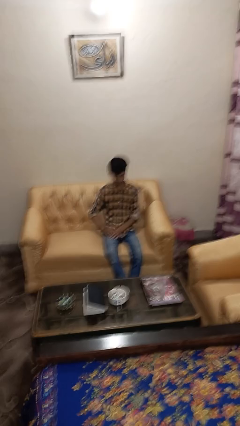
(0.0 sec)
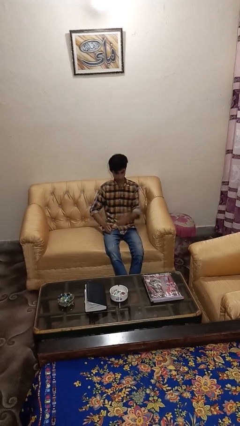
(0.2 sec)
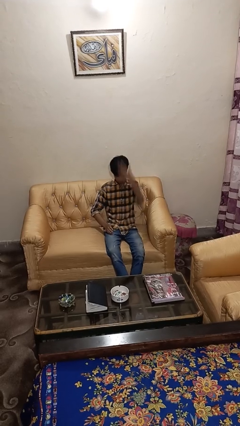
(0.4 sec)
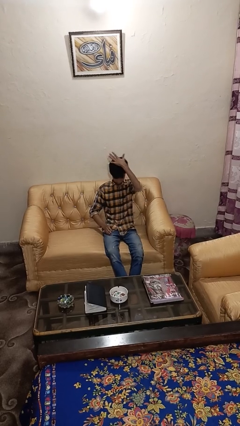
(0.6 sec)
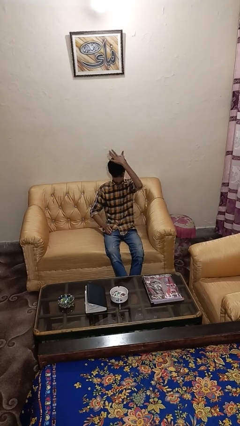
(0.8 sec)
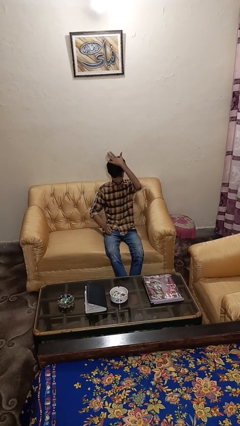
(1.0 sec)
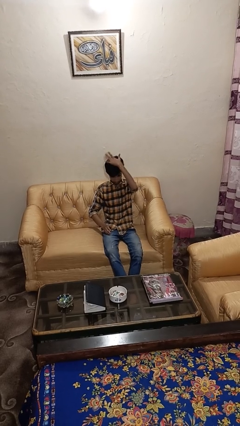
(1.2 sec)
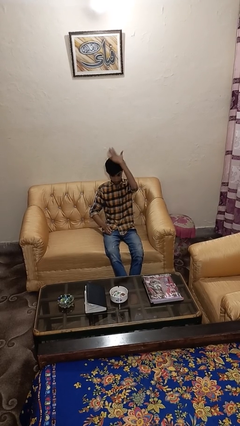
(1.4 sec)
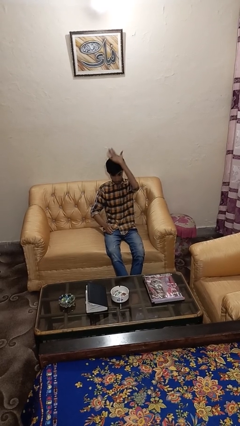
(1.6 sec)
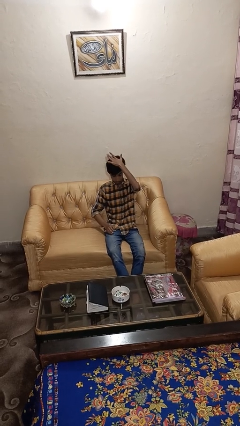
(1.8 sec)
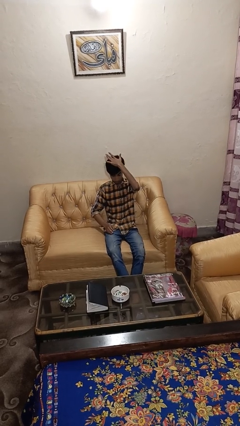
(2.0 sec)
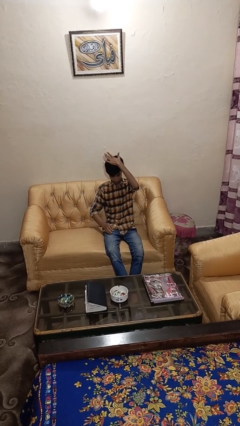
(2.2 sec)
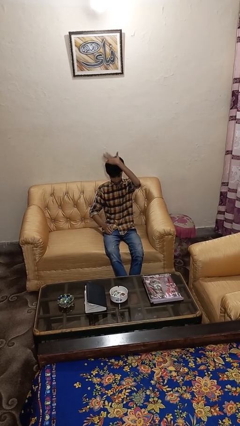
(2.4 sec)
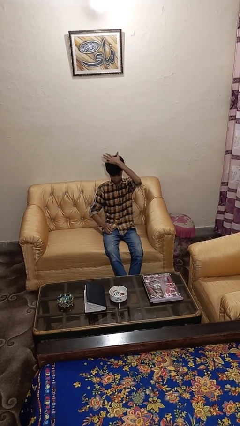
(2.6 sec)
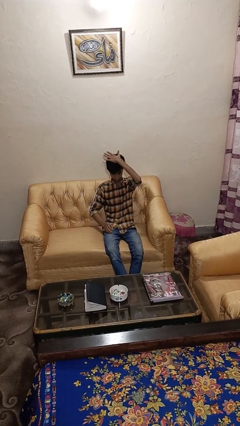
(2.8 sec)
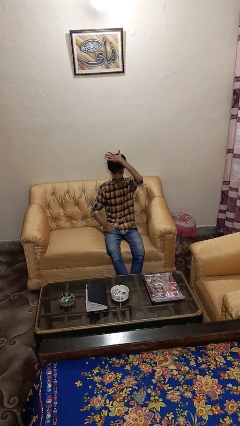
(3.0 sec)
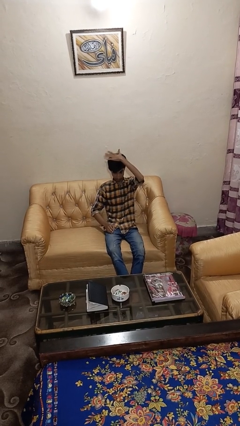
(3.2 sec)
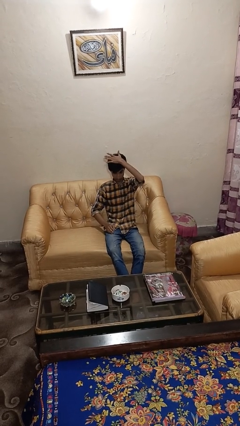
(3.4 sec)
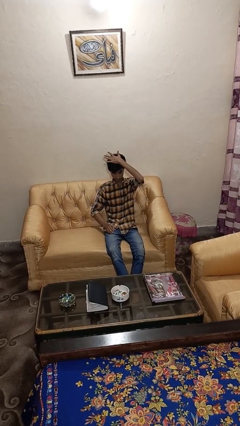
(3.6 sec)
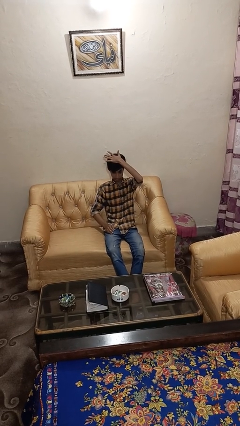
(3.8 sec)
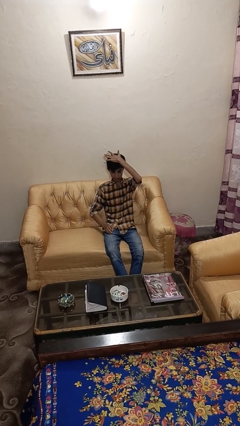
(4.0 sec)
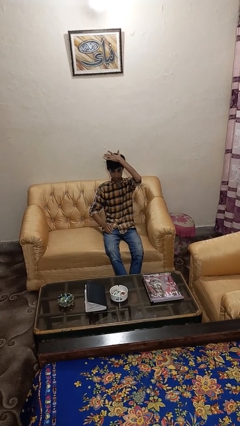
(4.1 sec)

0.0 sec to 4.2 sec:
person pats head

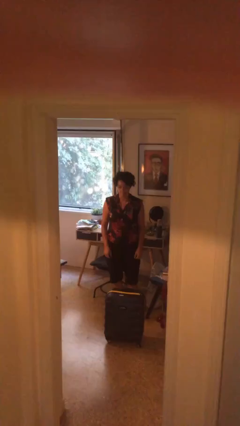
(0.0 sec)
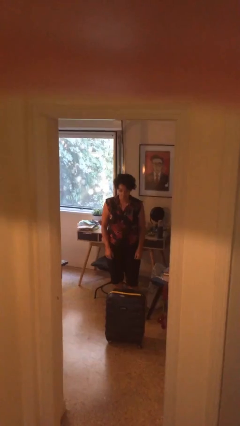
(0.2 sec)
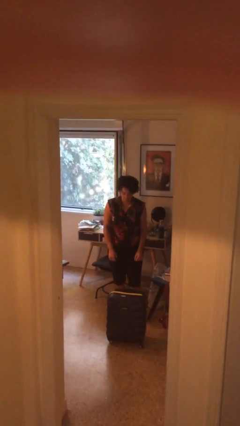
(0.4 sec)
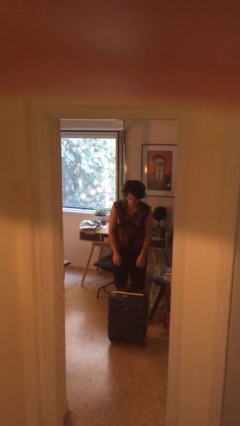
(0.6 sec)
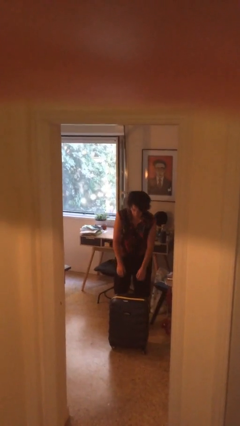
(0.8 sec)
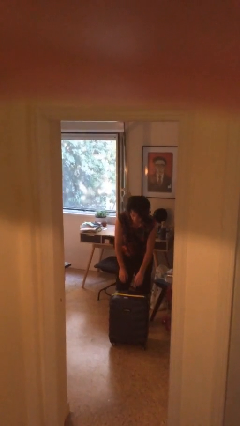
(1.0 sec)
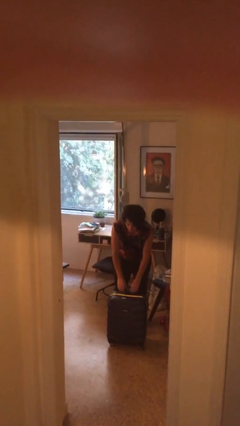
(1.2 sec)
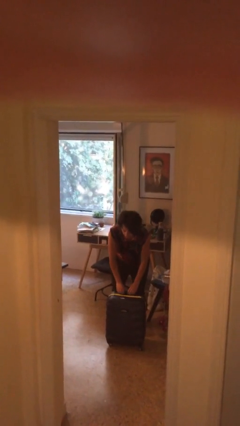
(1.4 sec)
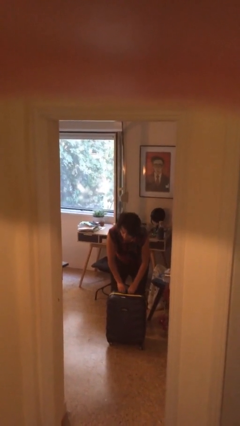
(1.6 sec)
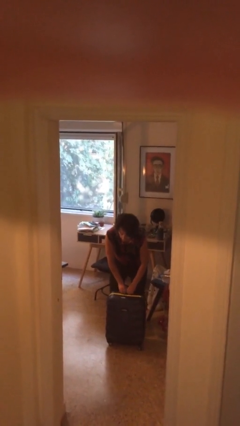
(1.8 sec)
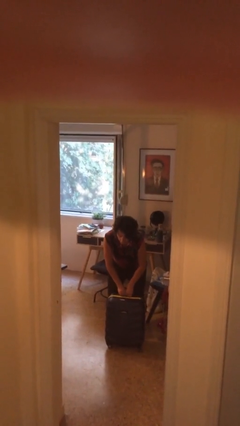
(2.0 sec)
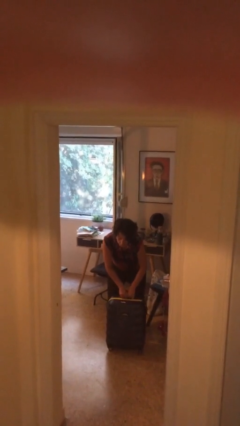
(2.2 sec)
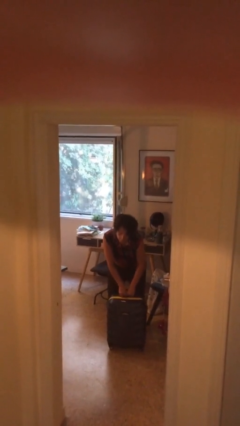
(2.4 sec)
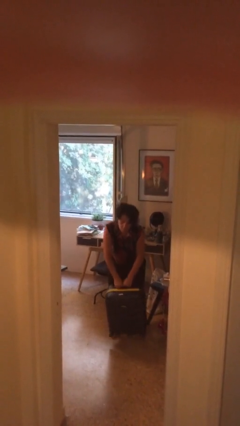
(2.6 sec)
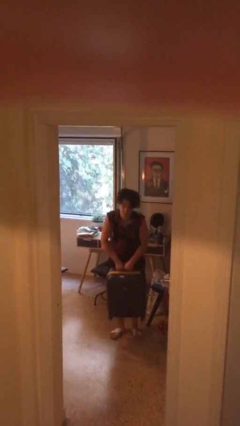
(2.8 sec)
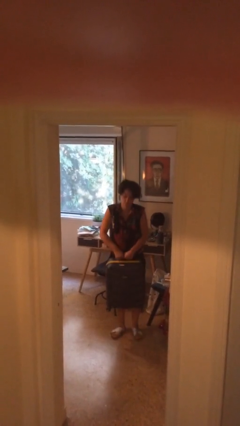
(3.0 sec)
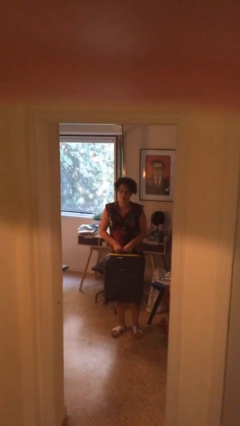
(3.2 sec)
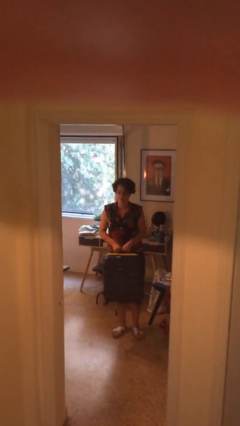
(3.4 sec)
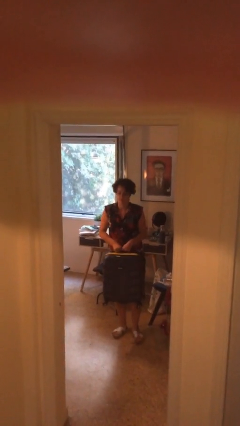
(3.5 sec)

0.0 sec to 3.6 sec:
person picks up object from floor

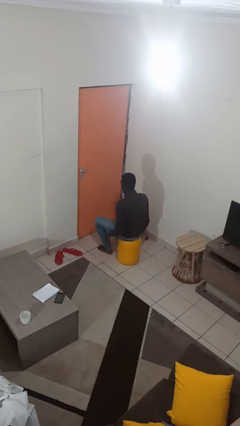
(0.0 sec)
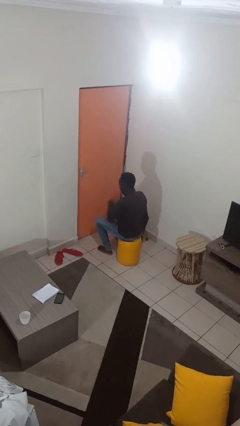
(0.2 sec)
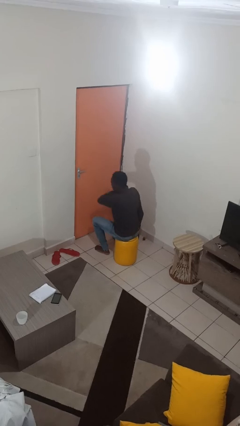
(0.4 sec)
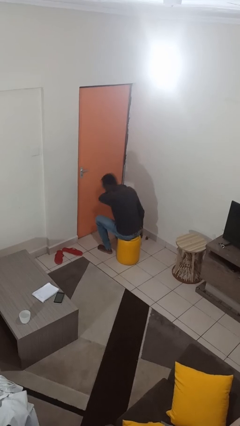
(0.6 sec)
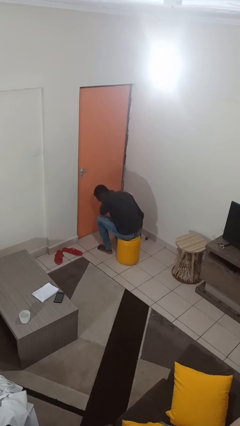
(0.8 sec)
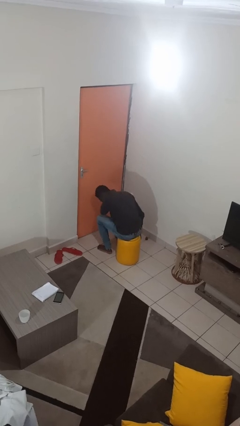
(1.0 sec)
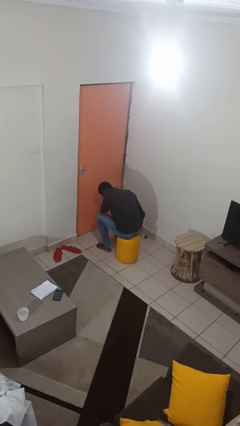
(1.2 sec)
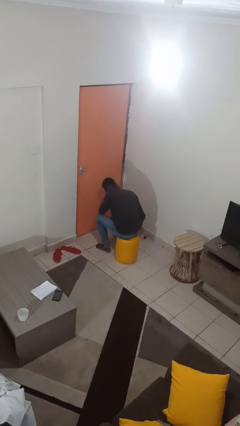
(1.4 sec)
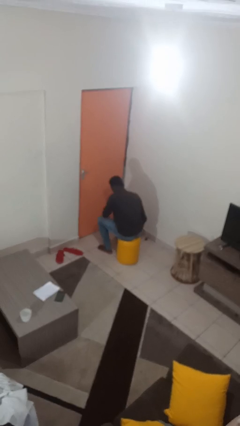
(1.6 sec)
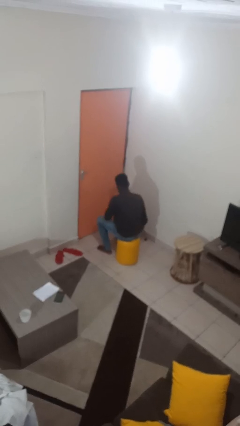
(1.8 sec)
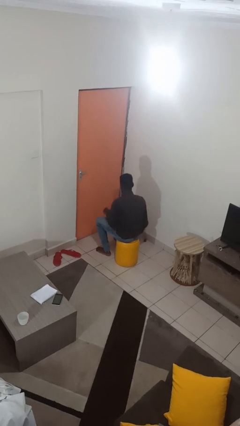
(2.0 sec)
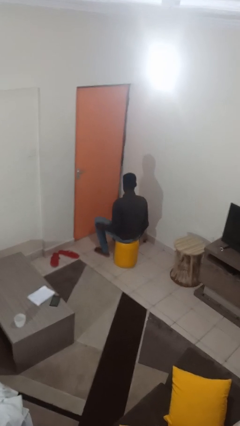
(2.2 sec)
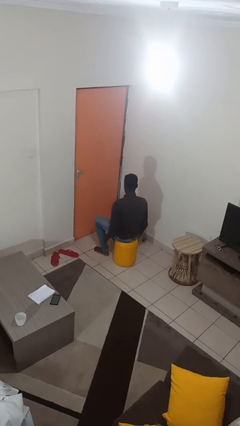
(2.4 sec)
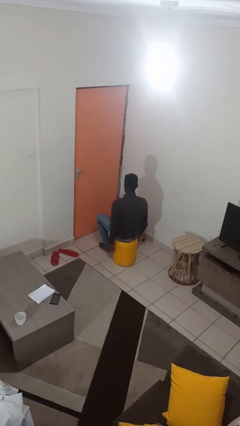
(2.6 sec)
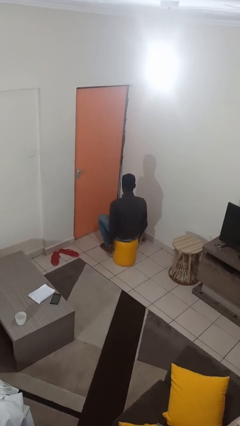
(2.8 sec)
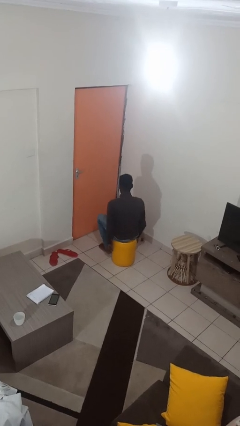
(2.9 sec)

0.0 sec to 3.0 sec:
person sneezes into arm

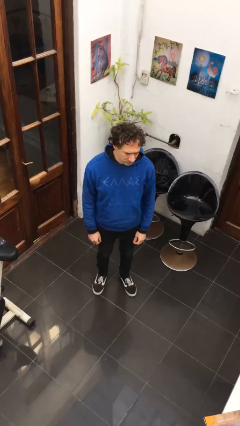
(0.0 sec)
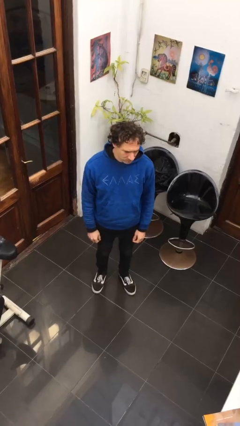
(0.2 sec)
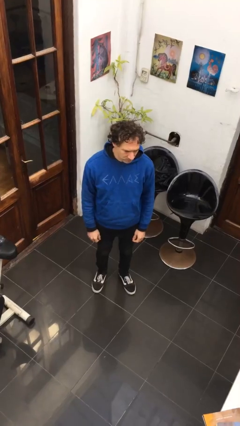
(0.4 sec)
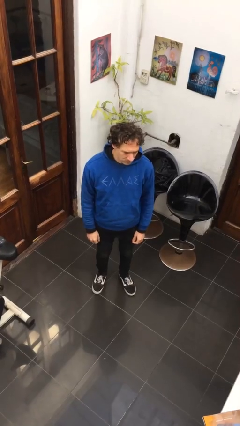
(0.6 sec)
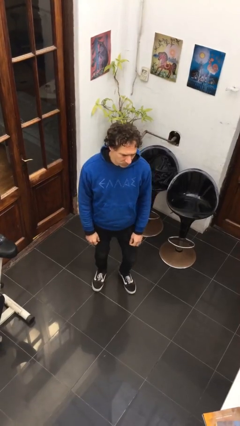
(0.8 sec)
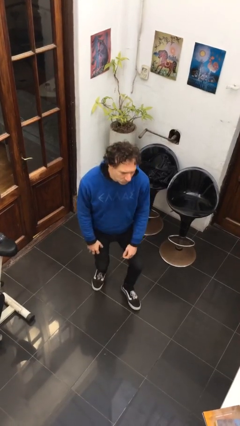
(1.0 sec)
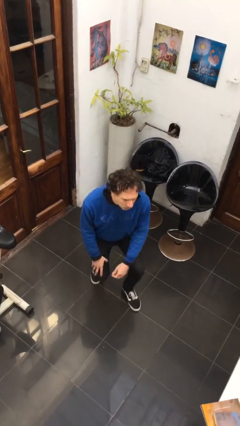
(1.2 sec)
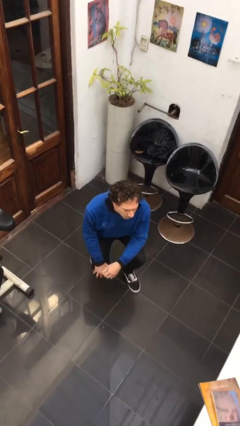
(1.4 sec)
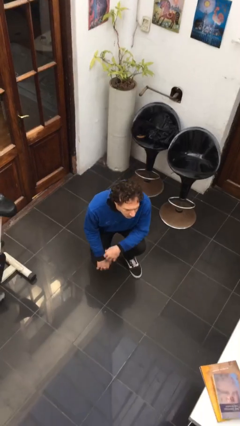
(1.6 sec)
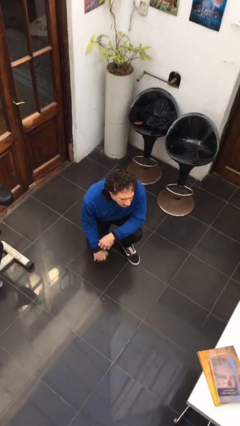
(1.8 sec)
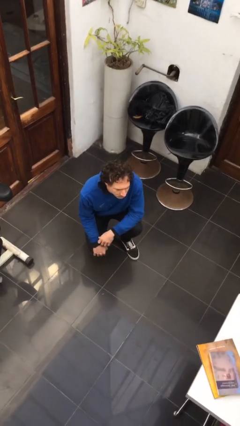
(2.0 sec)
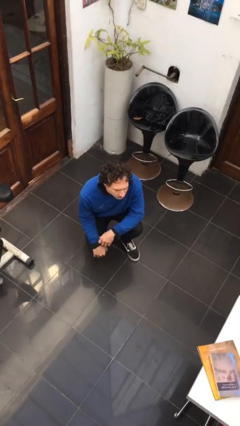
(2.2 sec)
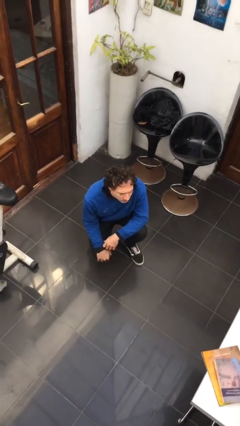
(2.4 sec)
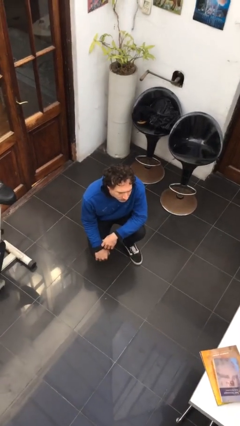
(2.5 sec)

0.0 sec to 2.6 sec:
person squats

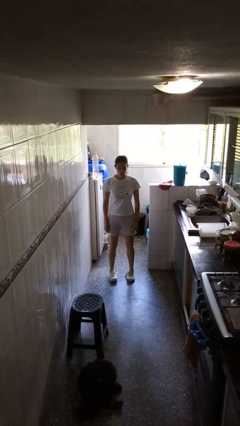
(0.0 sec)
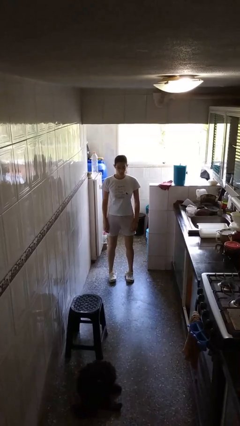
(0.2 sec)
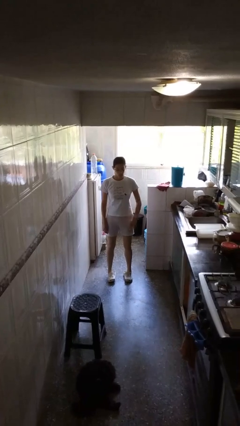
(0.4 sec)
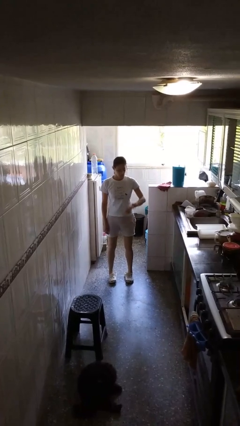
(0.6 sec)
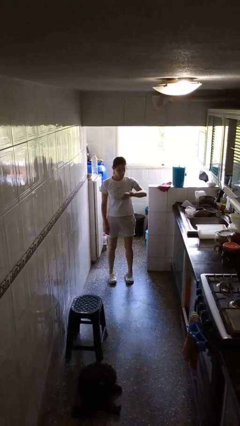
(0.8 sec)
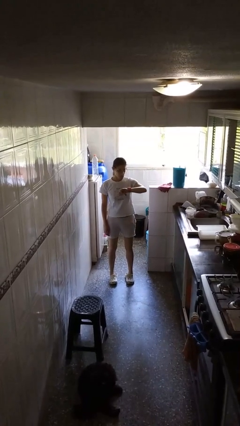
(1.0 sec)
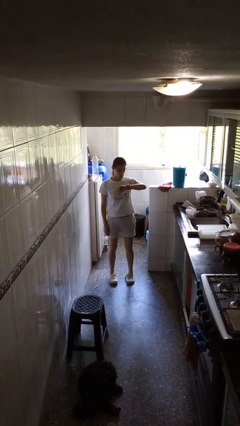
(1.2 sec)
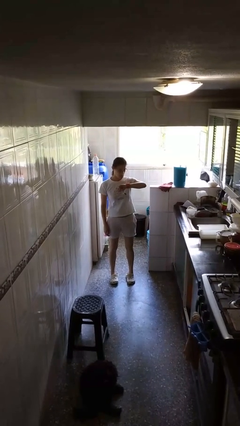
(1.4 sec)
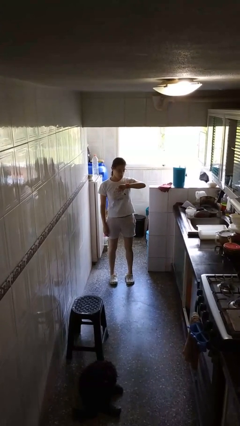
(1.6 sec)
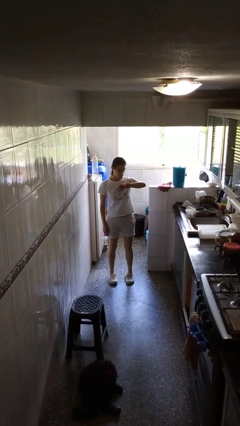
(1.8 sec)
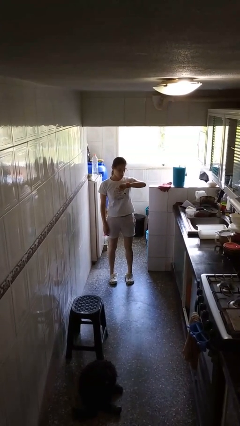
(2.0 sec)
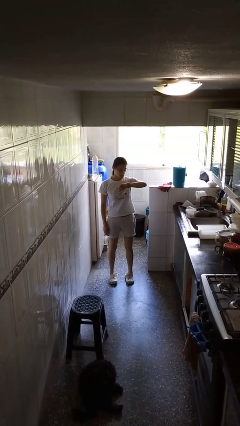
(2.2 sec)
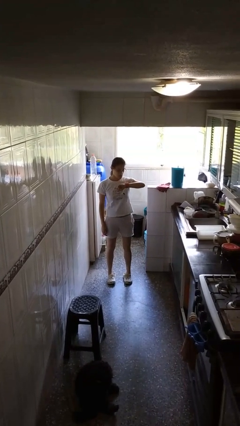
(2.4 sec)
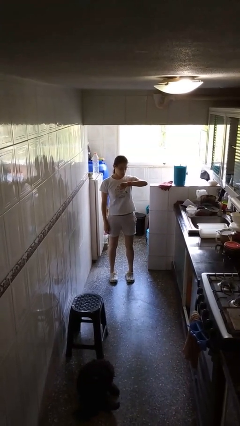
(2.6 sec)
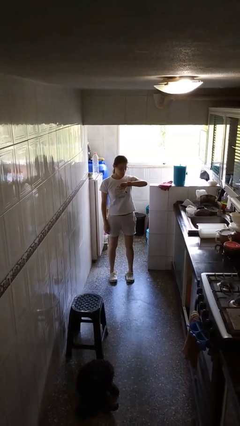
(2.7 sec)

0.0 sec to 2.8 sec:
person looks at wristwatch

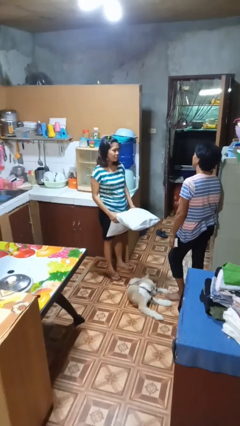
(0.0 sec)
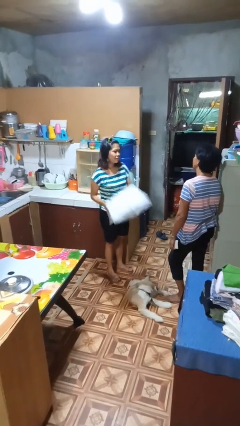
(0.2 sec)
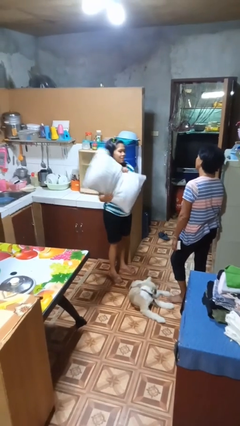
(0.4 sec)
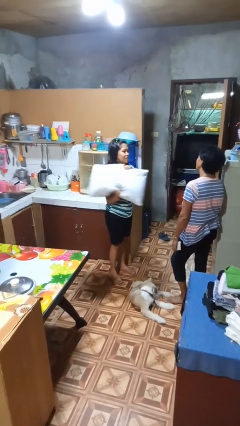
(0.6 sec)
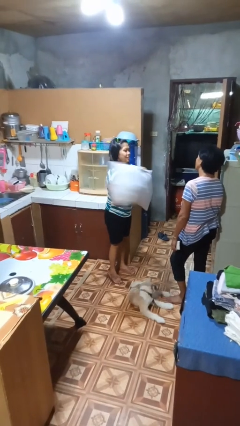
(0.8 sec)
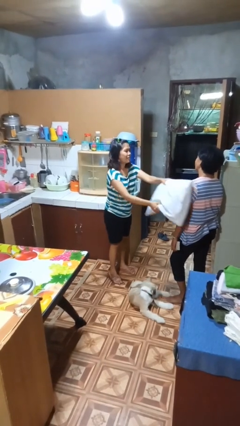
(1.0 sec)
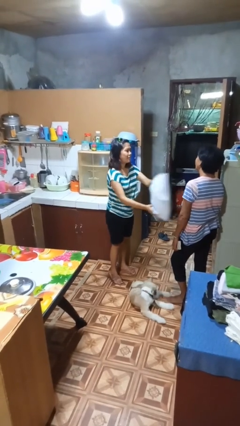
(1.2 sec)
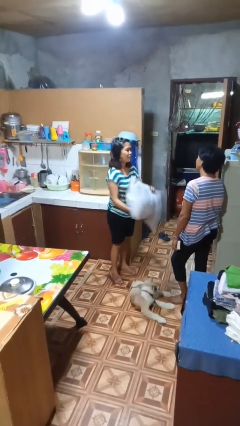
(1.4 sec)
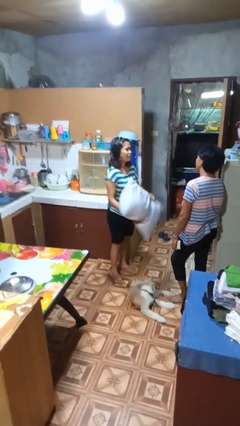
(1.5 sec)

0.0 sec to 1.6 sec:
person hits person with pillow
